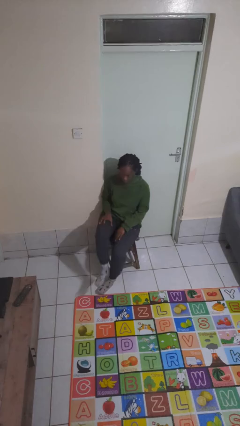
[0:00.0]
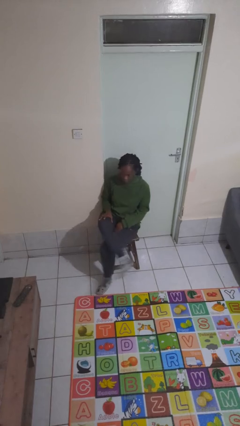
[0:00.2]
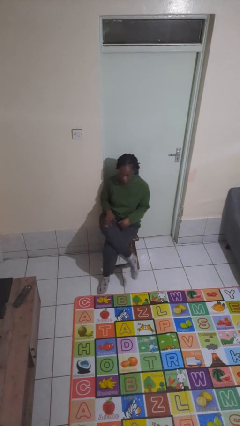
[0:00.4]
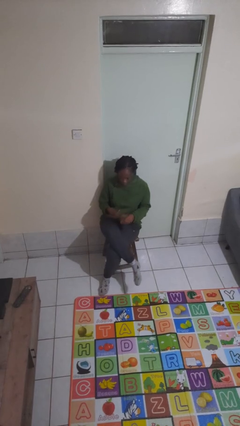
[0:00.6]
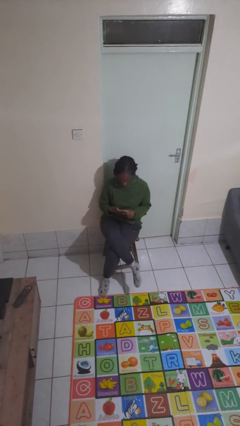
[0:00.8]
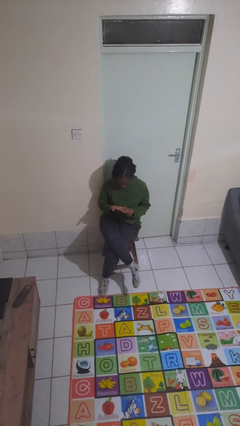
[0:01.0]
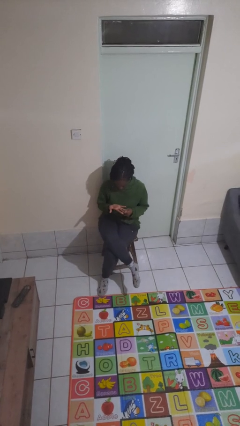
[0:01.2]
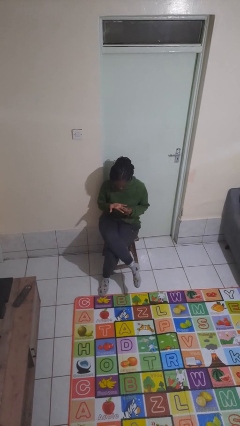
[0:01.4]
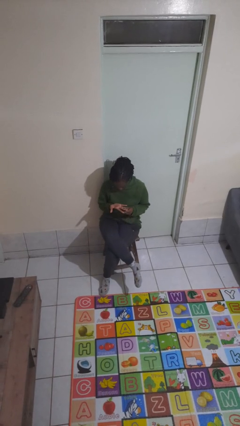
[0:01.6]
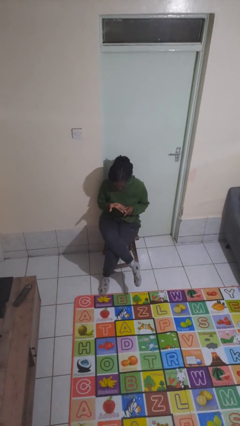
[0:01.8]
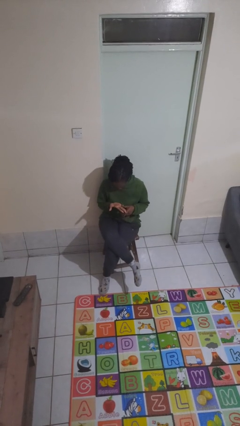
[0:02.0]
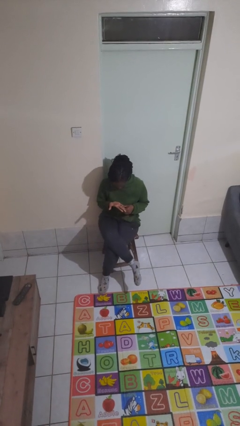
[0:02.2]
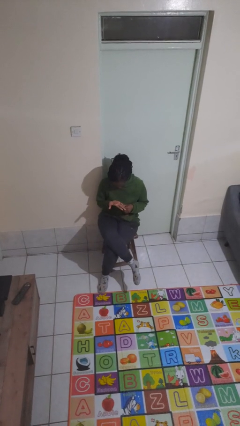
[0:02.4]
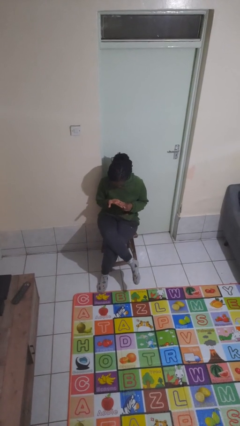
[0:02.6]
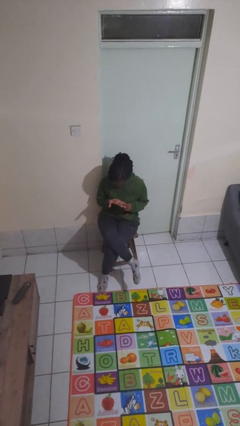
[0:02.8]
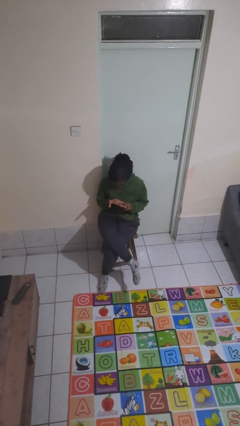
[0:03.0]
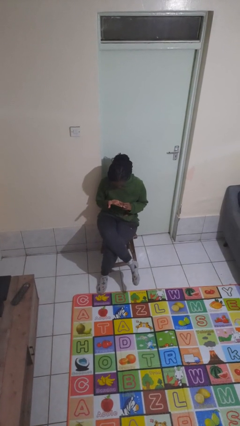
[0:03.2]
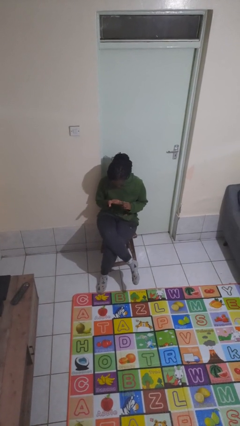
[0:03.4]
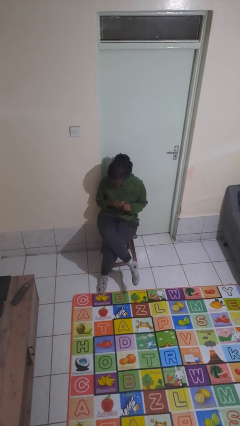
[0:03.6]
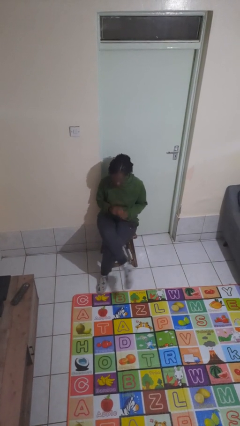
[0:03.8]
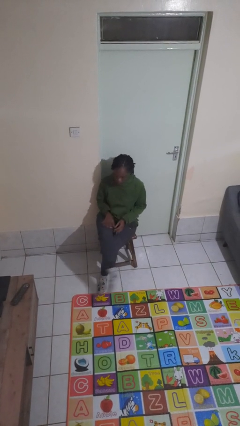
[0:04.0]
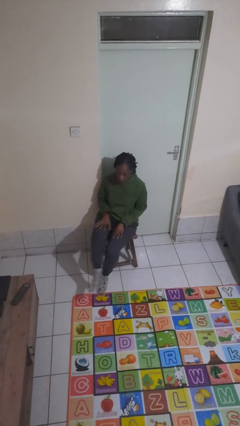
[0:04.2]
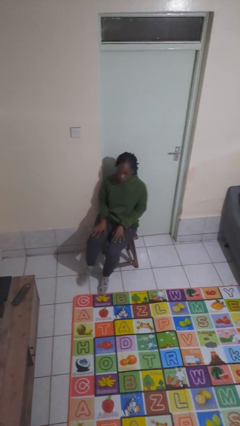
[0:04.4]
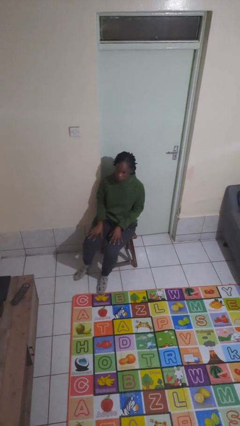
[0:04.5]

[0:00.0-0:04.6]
person looks at hands in lap

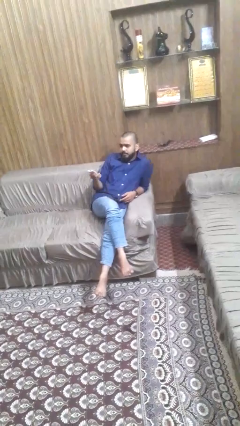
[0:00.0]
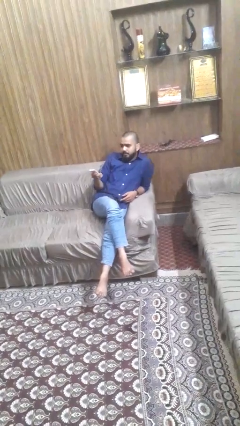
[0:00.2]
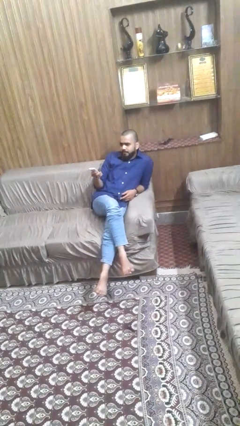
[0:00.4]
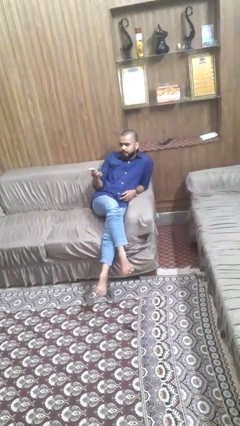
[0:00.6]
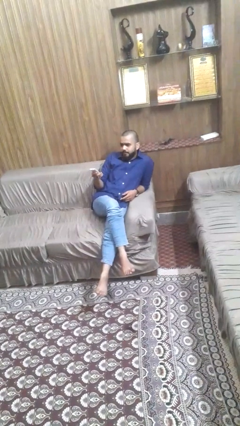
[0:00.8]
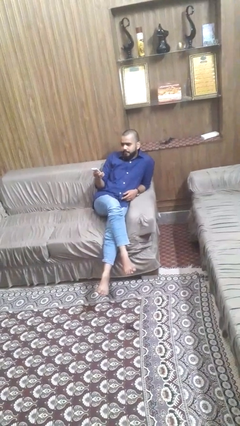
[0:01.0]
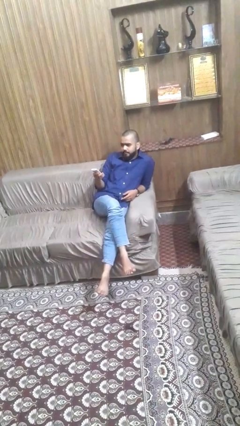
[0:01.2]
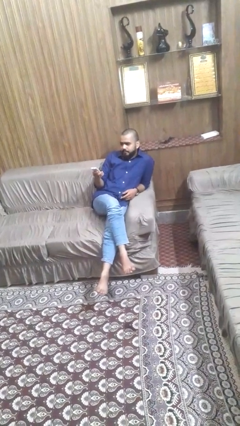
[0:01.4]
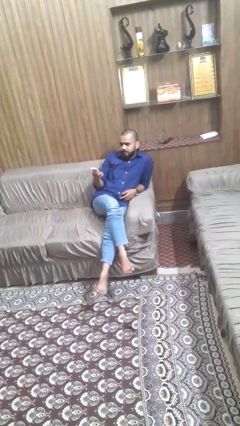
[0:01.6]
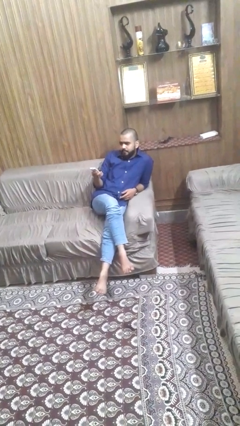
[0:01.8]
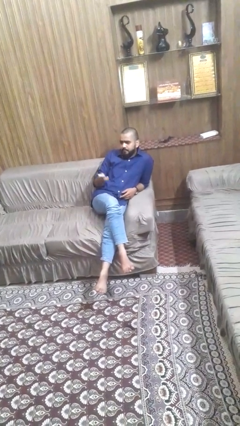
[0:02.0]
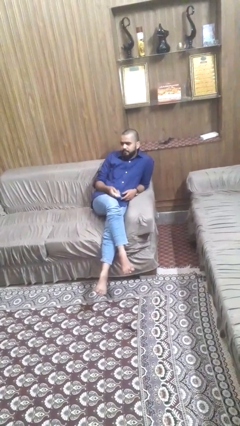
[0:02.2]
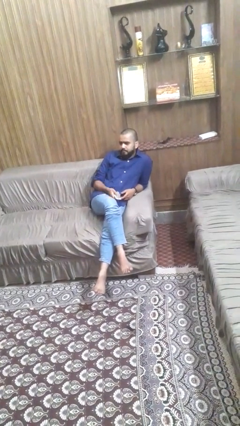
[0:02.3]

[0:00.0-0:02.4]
person uses television remote

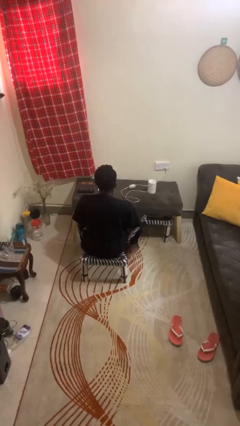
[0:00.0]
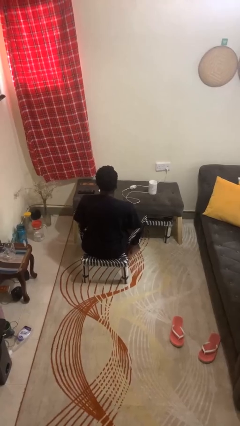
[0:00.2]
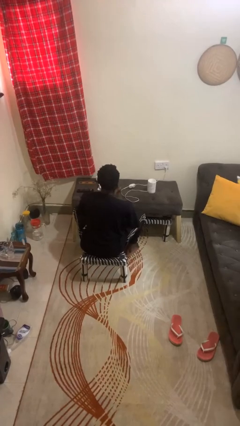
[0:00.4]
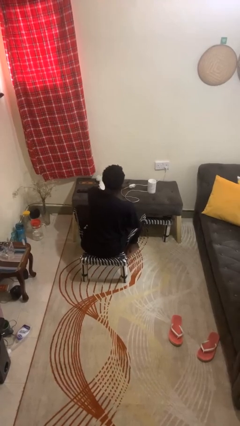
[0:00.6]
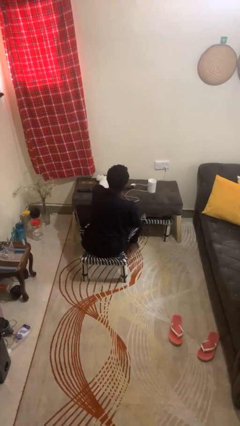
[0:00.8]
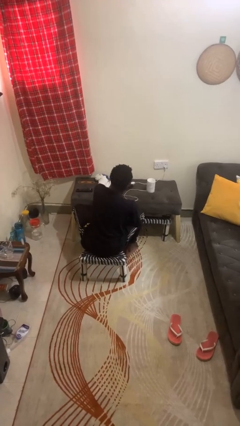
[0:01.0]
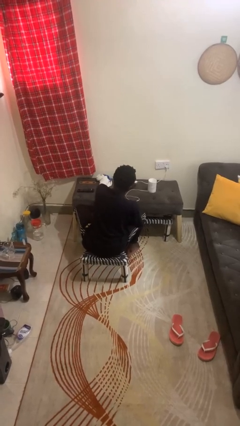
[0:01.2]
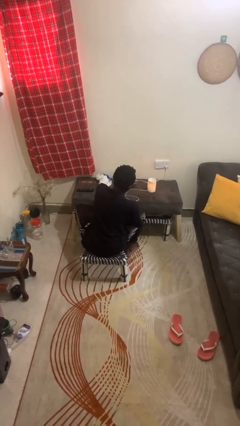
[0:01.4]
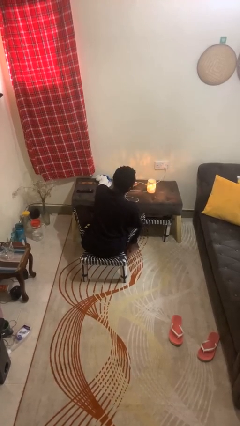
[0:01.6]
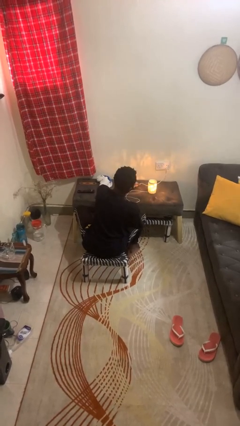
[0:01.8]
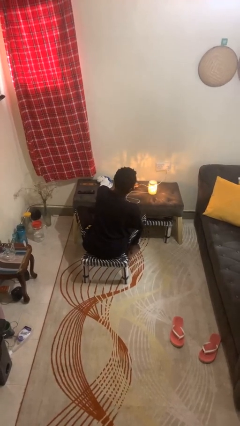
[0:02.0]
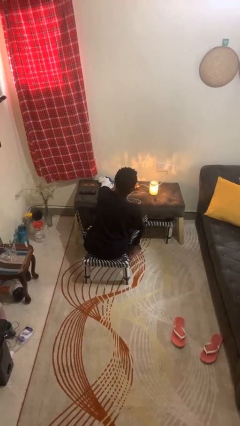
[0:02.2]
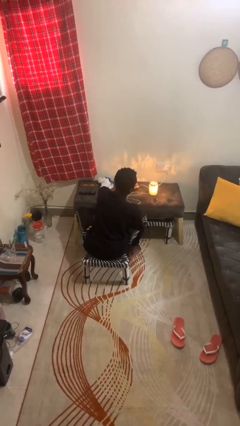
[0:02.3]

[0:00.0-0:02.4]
person turns on lamp

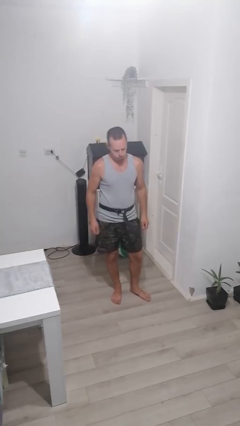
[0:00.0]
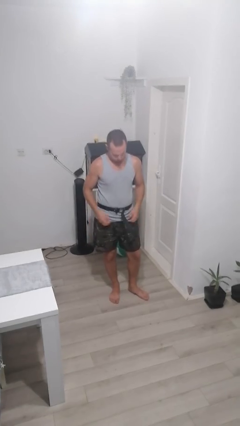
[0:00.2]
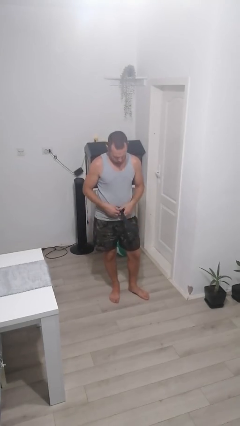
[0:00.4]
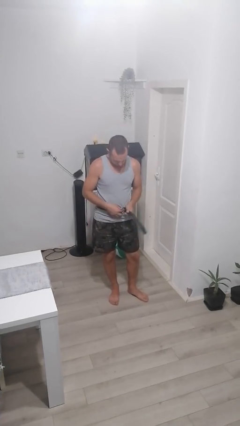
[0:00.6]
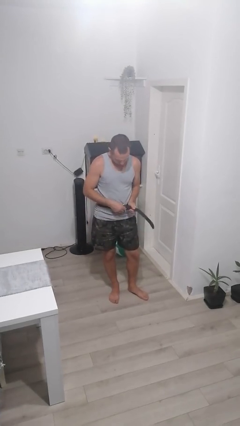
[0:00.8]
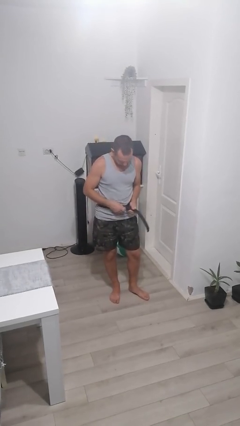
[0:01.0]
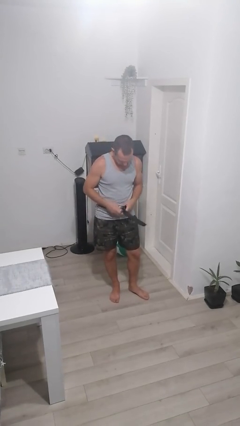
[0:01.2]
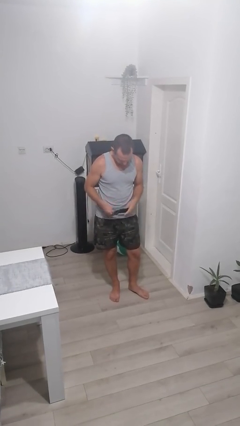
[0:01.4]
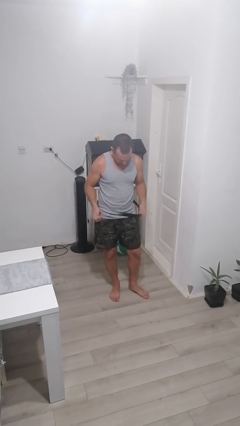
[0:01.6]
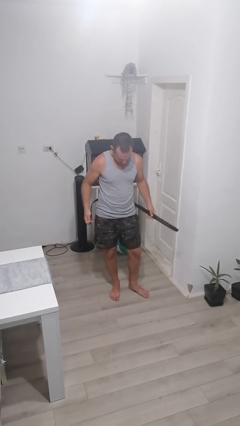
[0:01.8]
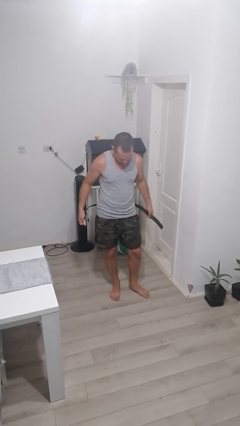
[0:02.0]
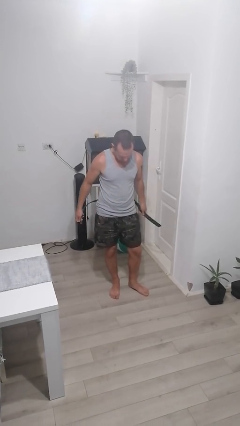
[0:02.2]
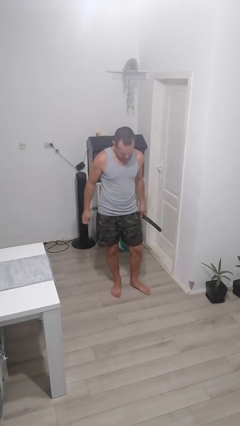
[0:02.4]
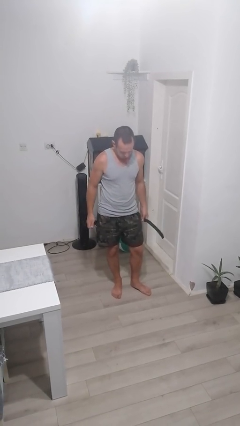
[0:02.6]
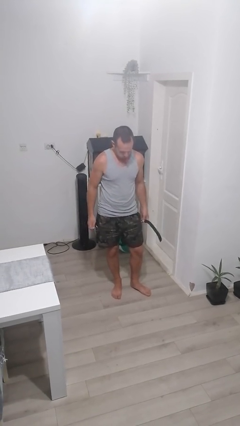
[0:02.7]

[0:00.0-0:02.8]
person takes off belt

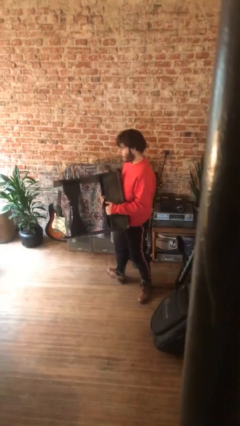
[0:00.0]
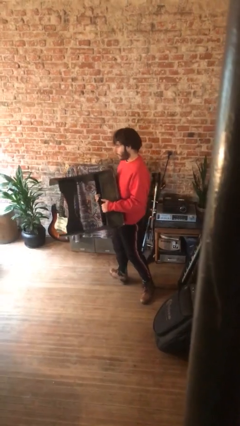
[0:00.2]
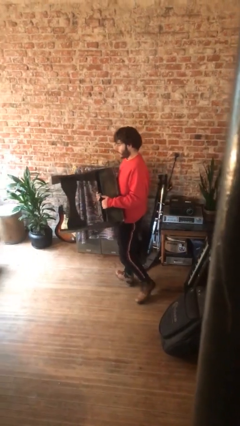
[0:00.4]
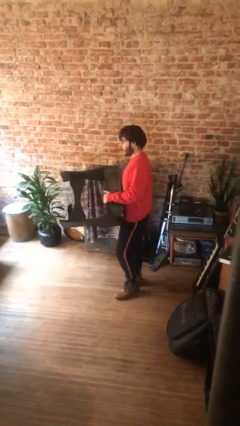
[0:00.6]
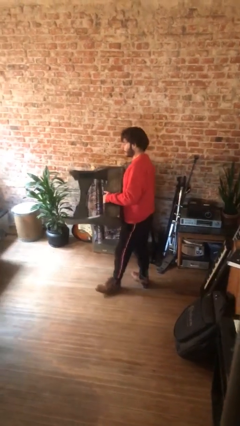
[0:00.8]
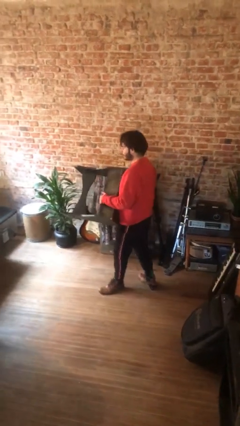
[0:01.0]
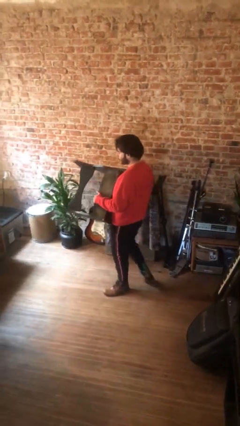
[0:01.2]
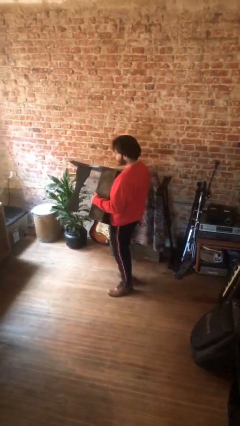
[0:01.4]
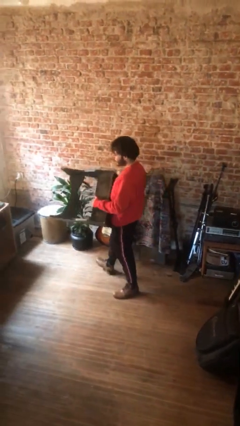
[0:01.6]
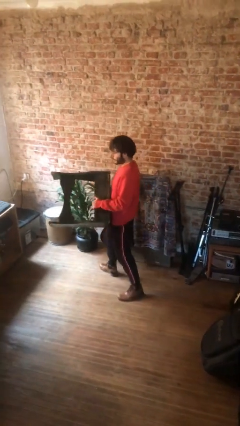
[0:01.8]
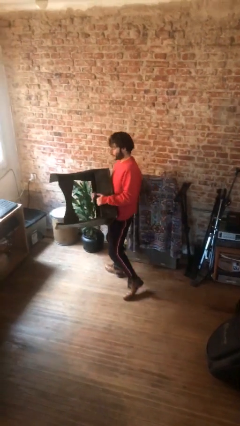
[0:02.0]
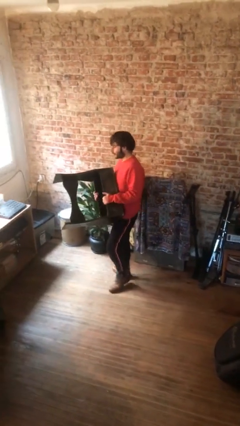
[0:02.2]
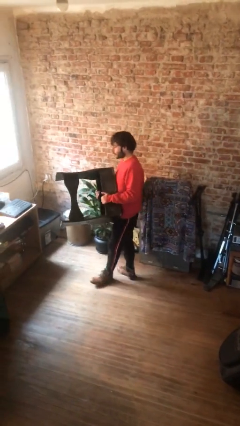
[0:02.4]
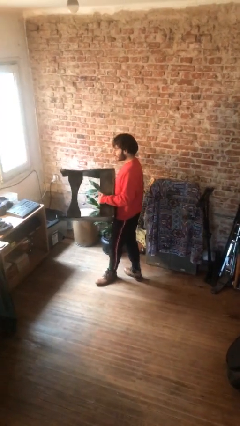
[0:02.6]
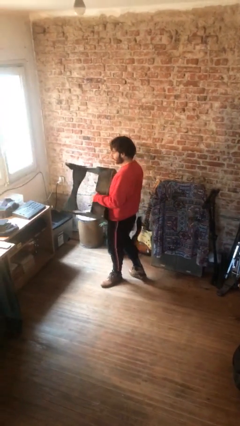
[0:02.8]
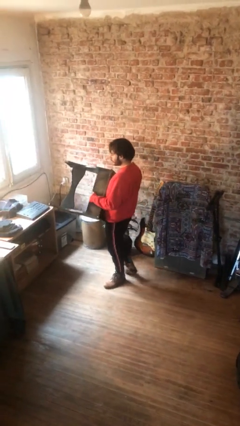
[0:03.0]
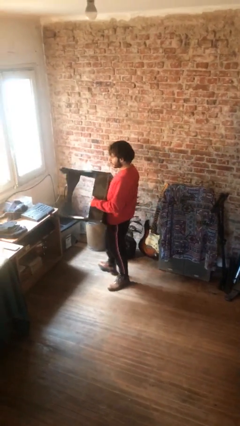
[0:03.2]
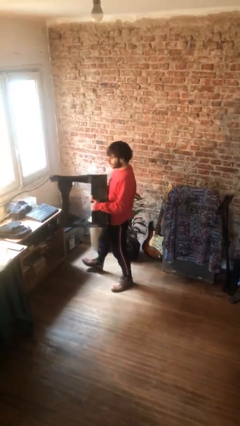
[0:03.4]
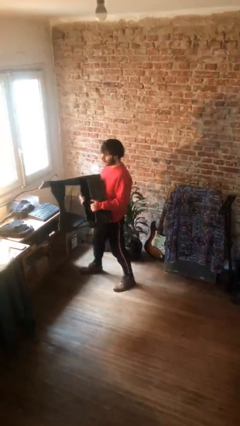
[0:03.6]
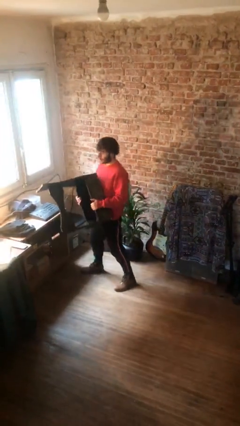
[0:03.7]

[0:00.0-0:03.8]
person carries furniture

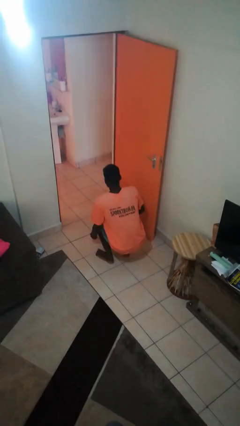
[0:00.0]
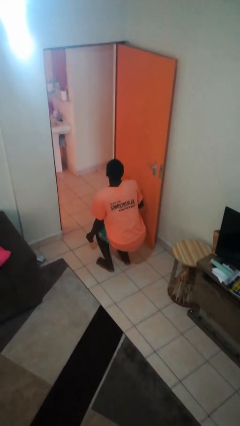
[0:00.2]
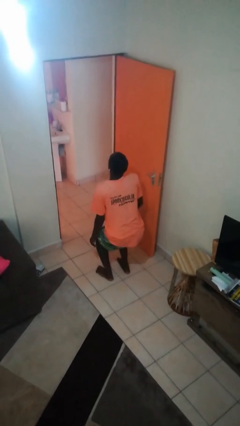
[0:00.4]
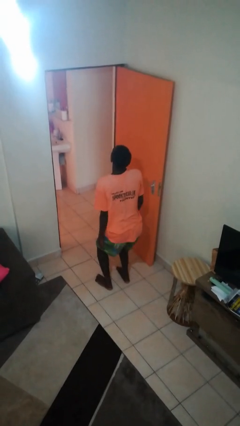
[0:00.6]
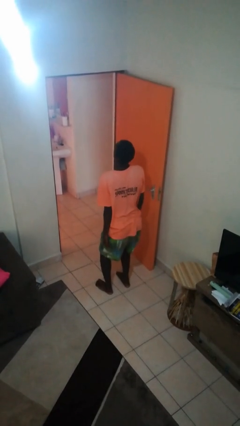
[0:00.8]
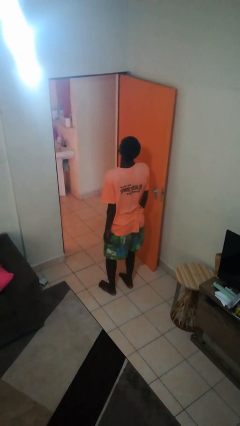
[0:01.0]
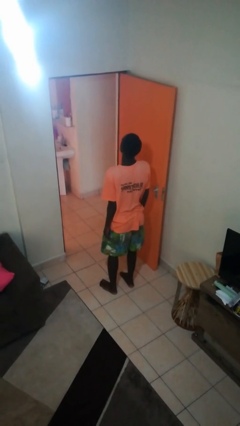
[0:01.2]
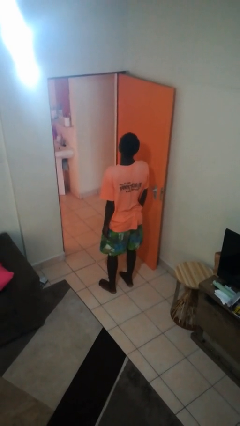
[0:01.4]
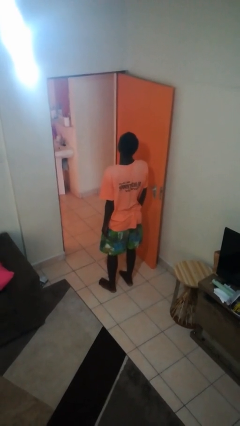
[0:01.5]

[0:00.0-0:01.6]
person stands up
